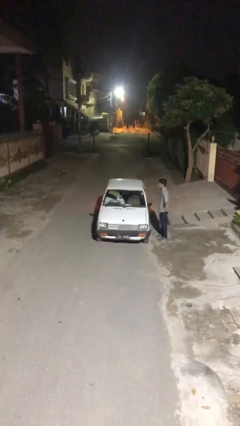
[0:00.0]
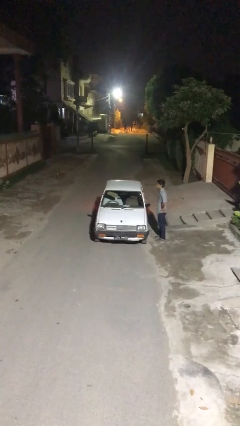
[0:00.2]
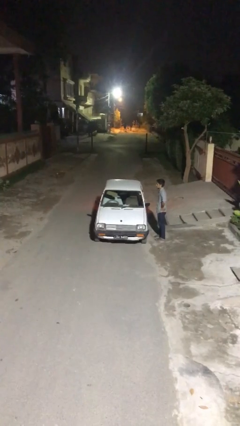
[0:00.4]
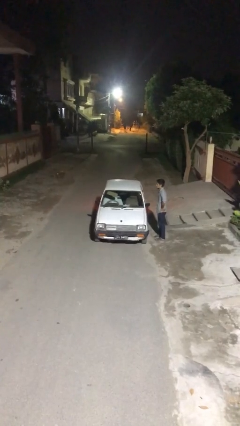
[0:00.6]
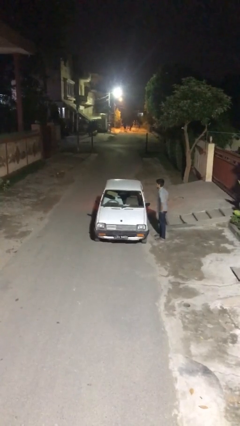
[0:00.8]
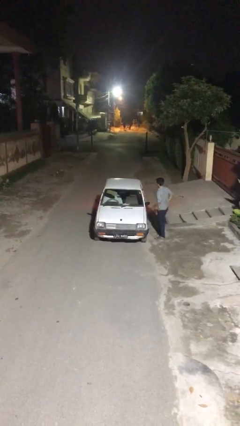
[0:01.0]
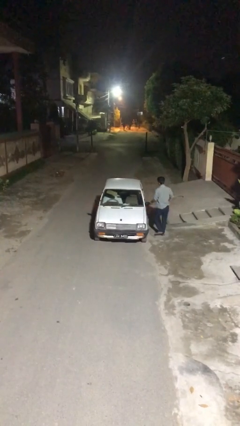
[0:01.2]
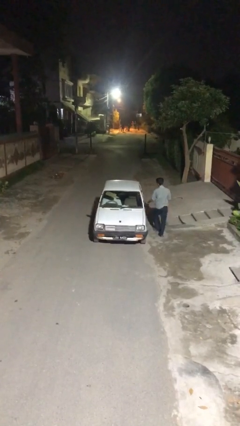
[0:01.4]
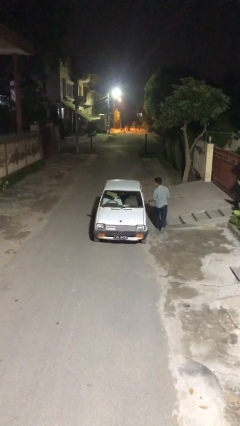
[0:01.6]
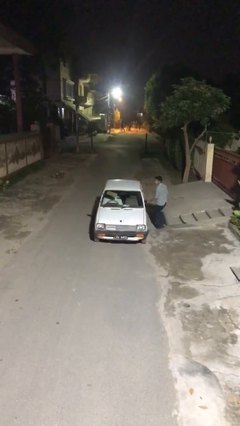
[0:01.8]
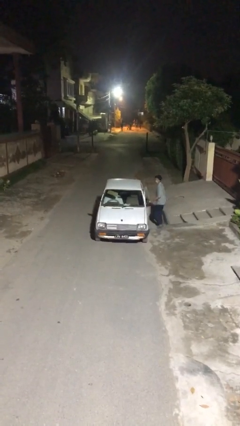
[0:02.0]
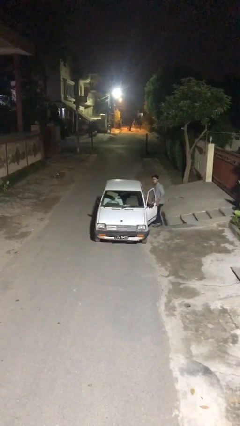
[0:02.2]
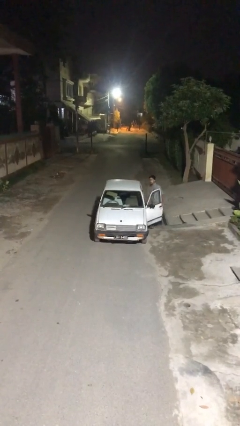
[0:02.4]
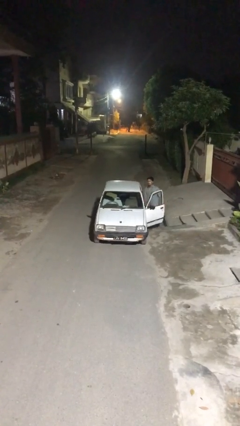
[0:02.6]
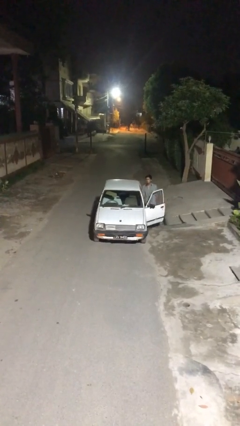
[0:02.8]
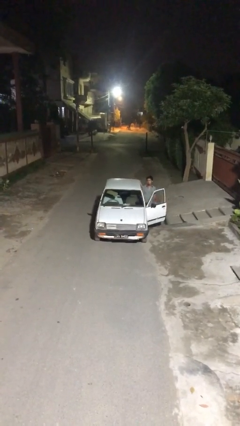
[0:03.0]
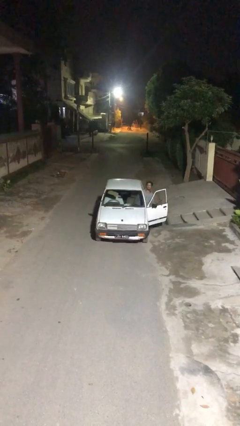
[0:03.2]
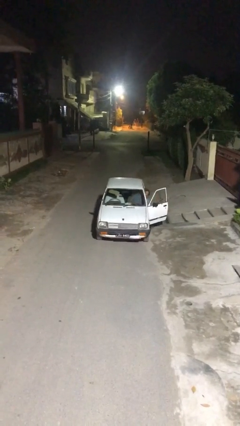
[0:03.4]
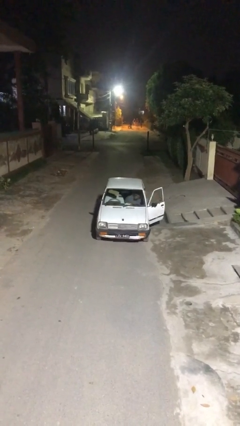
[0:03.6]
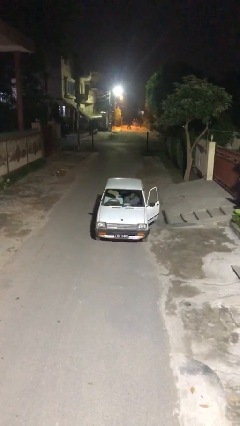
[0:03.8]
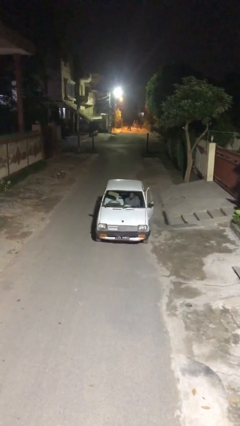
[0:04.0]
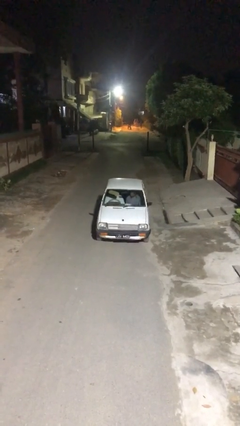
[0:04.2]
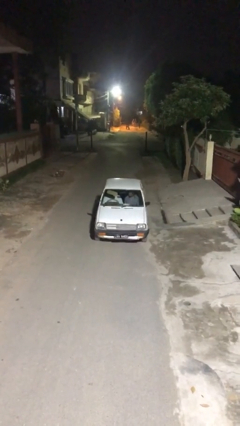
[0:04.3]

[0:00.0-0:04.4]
car picks up person

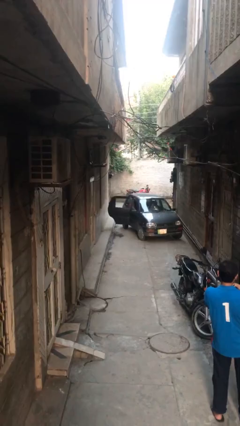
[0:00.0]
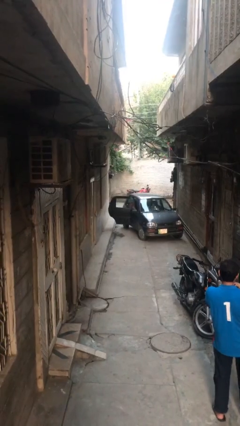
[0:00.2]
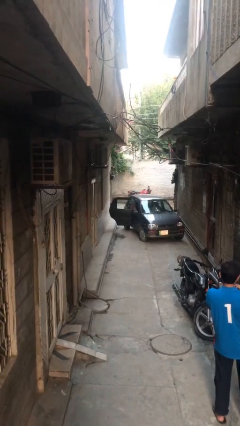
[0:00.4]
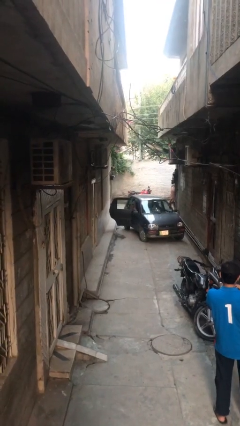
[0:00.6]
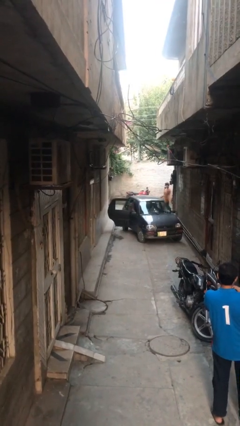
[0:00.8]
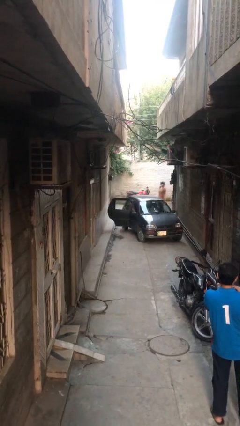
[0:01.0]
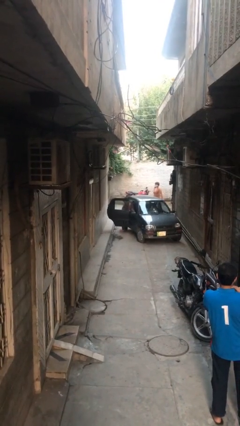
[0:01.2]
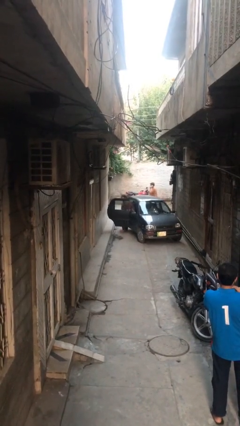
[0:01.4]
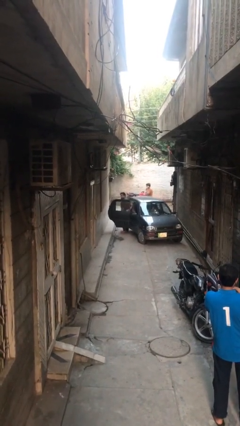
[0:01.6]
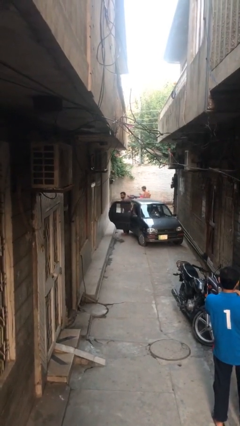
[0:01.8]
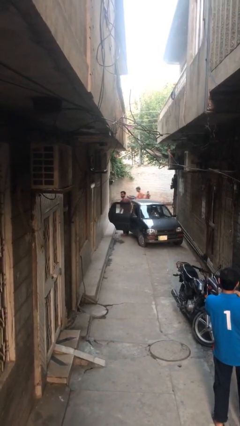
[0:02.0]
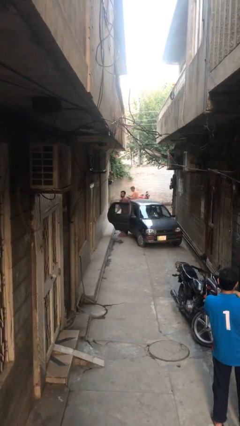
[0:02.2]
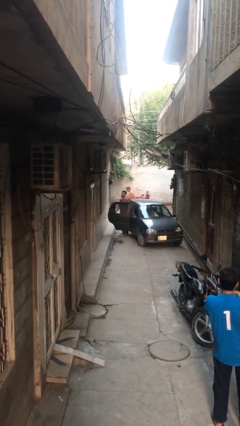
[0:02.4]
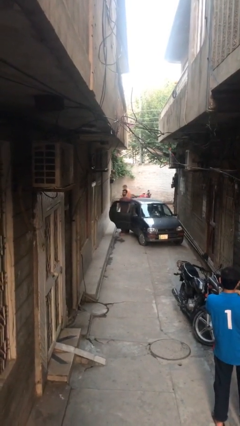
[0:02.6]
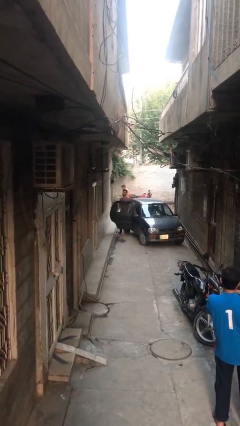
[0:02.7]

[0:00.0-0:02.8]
person exits car

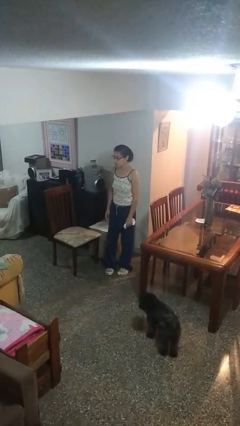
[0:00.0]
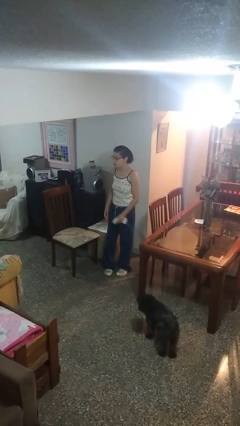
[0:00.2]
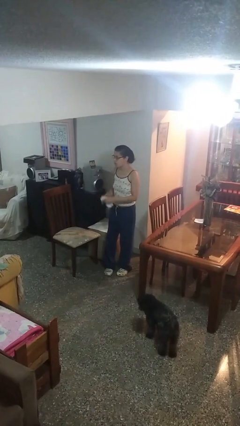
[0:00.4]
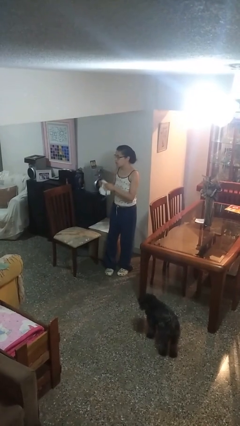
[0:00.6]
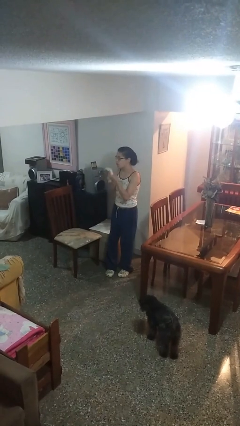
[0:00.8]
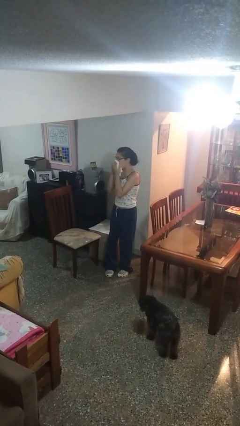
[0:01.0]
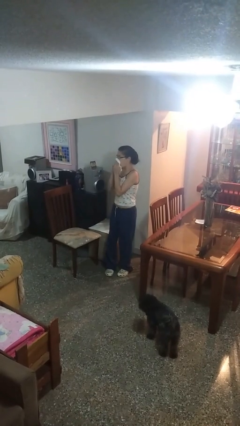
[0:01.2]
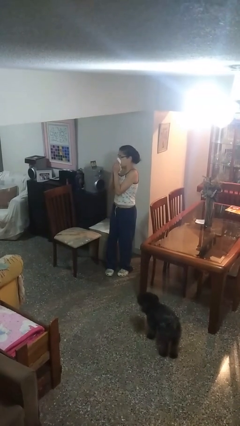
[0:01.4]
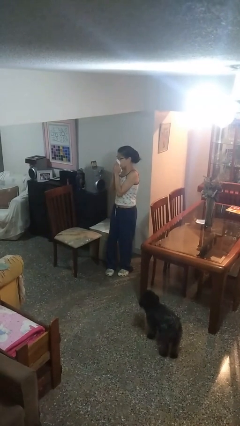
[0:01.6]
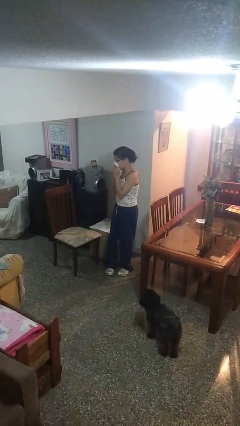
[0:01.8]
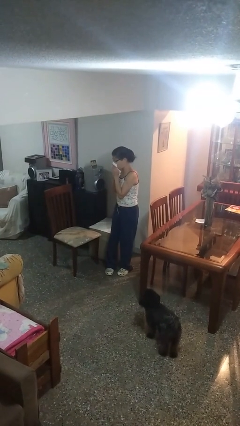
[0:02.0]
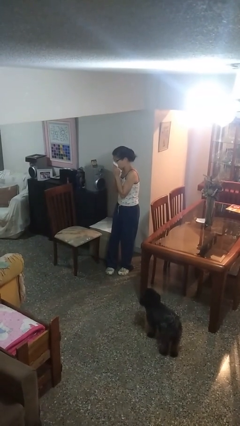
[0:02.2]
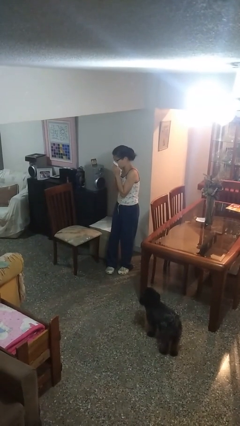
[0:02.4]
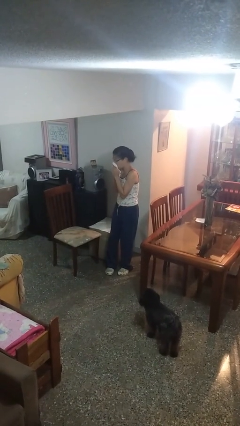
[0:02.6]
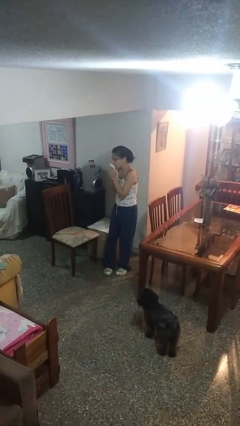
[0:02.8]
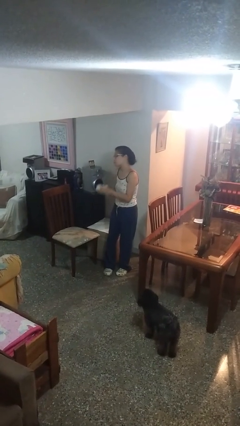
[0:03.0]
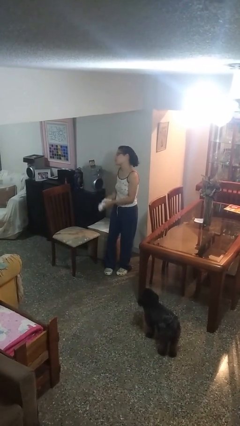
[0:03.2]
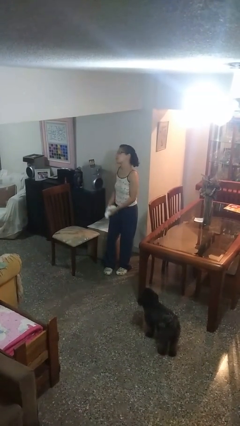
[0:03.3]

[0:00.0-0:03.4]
person blows nose

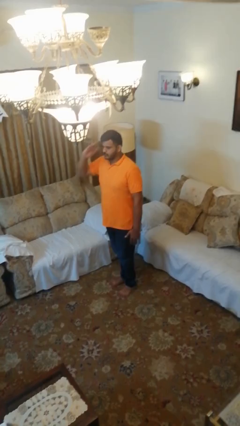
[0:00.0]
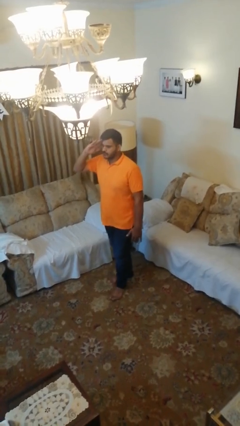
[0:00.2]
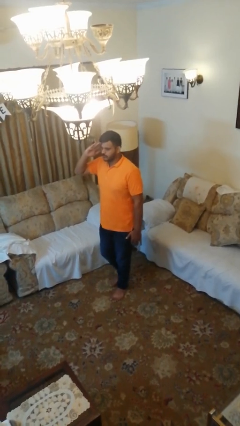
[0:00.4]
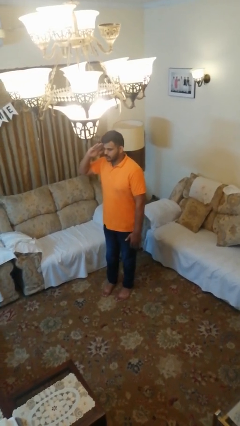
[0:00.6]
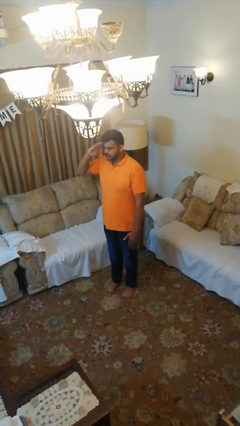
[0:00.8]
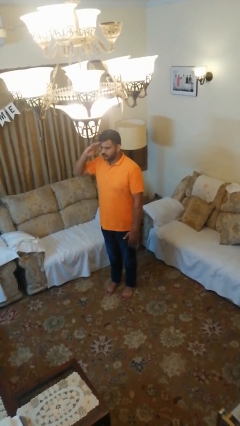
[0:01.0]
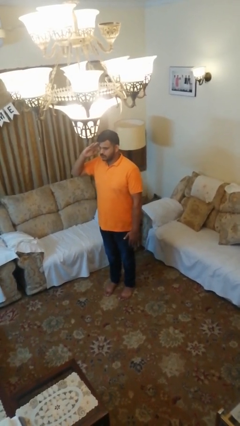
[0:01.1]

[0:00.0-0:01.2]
person salutes

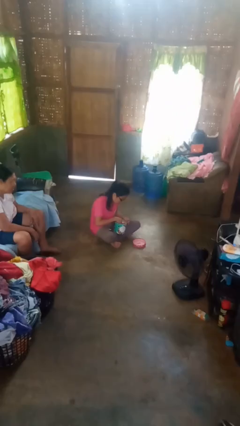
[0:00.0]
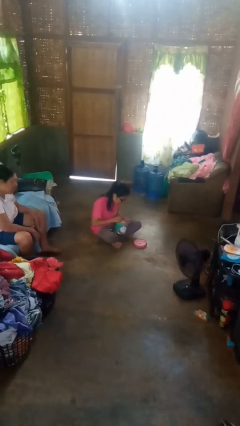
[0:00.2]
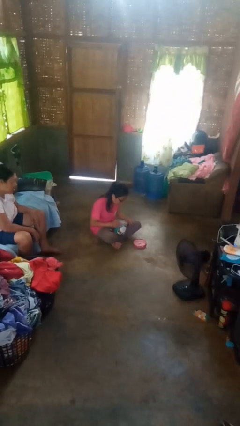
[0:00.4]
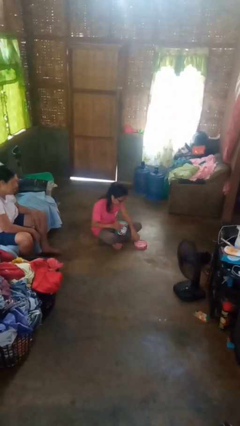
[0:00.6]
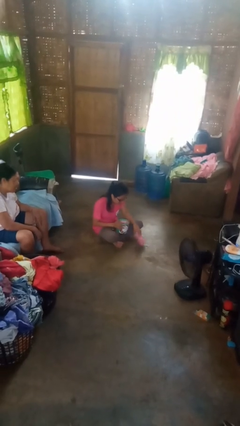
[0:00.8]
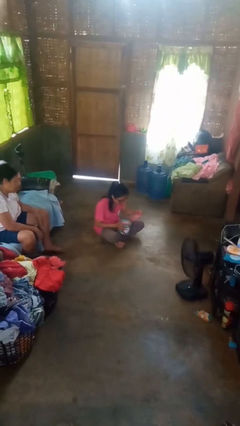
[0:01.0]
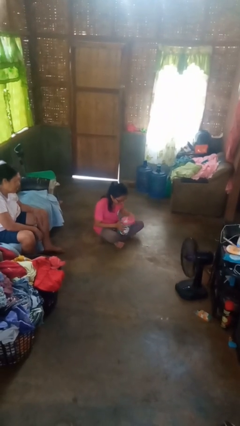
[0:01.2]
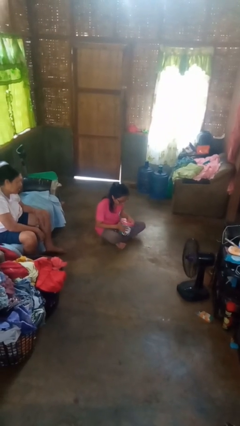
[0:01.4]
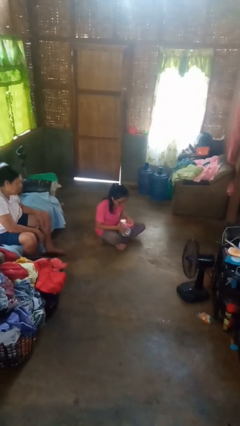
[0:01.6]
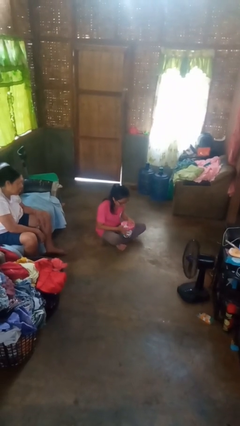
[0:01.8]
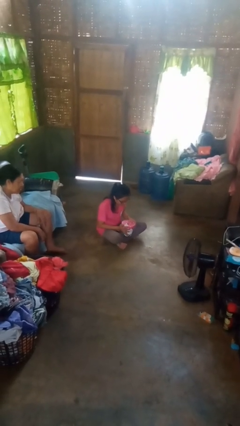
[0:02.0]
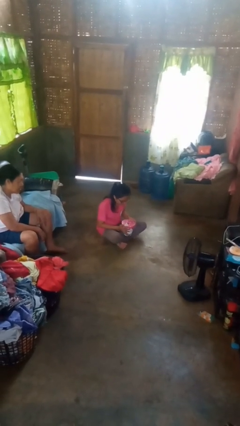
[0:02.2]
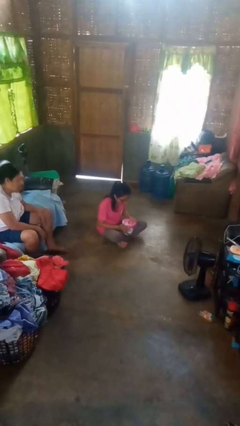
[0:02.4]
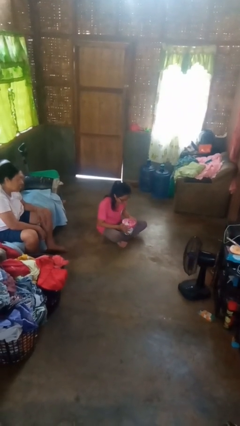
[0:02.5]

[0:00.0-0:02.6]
person closes jewelry box

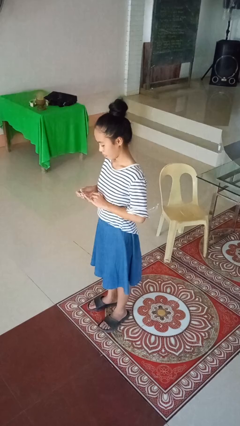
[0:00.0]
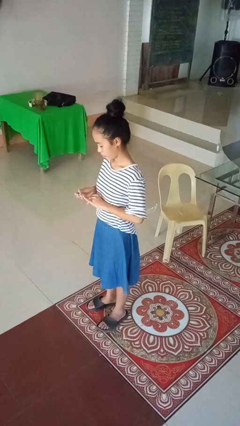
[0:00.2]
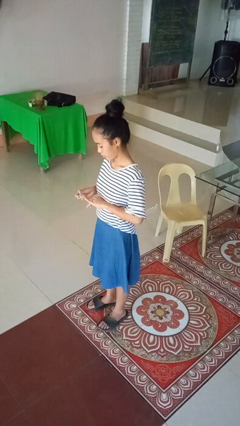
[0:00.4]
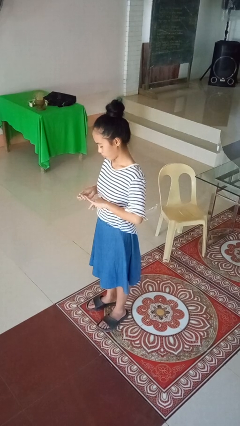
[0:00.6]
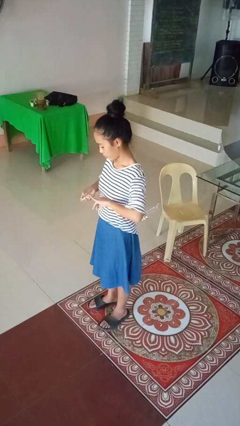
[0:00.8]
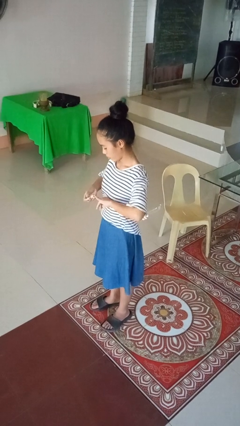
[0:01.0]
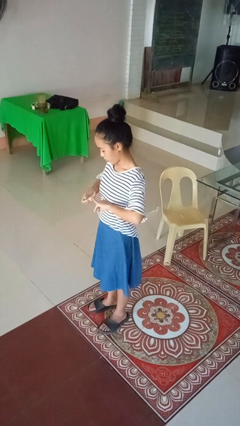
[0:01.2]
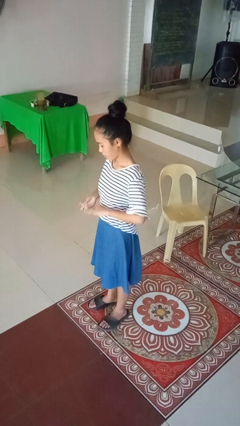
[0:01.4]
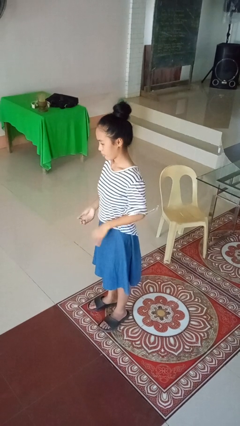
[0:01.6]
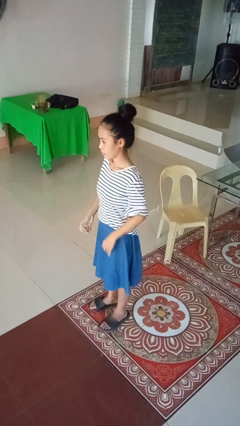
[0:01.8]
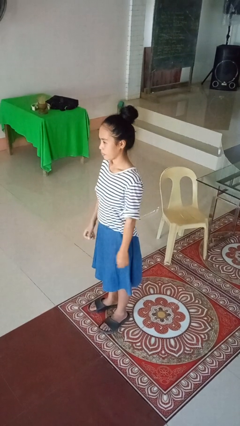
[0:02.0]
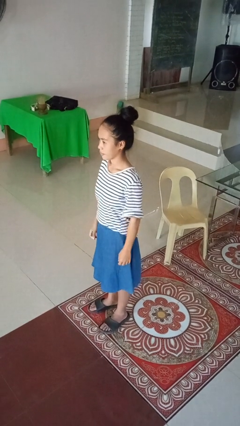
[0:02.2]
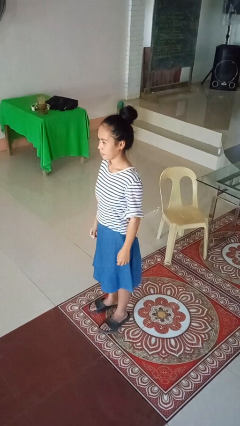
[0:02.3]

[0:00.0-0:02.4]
person clips fingernails
